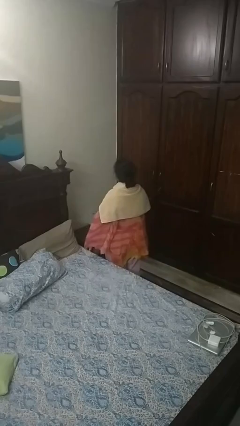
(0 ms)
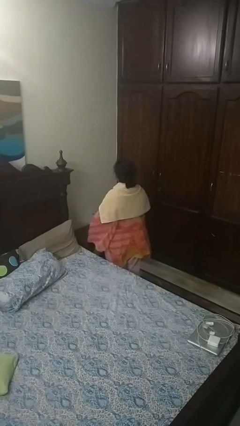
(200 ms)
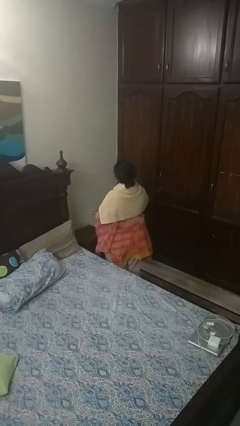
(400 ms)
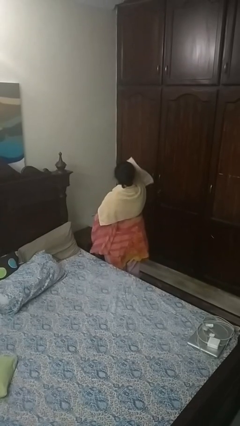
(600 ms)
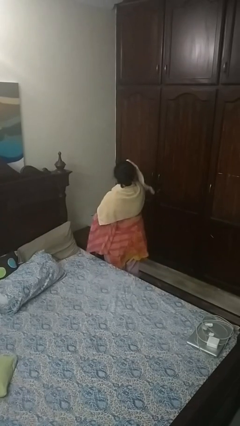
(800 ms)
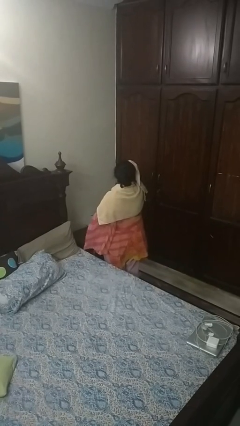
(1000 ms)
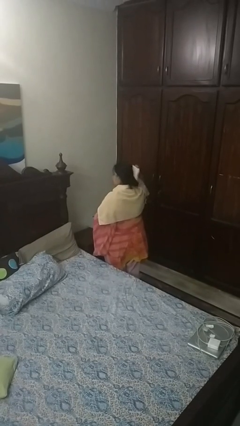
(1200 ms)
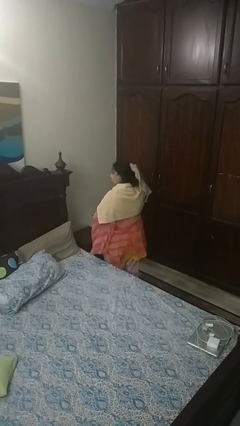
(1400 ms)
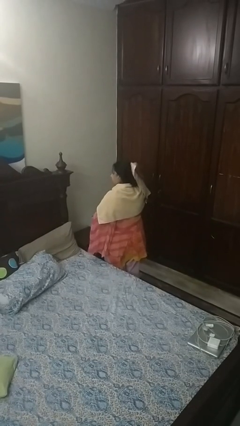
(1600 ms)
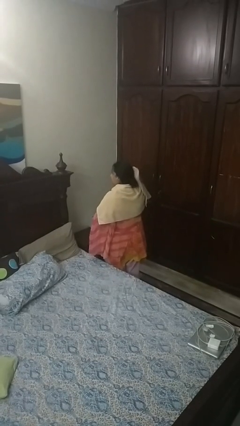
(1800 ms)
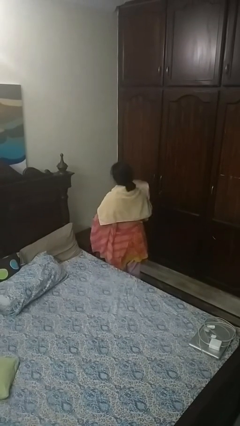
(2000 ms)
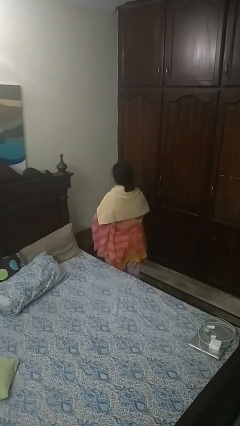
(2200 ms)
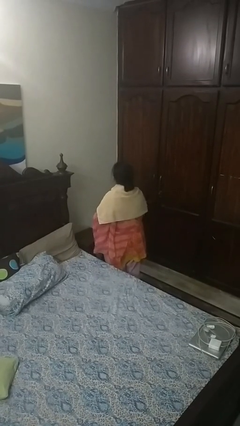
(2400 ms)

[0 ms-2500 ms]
person dries hair with towel

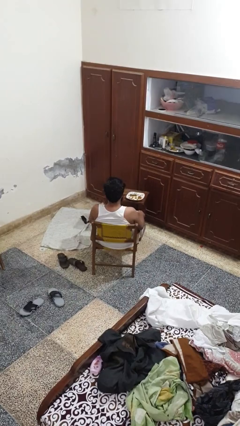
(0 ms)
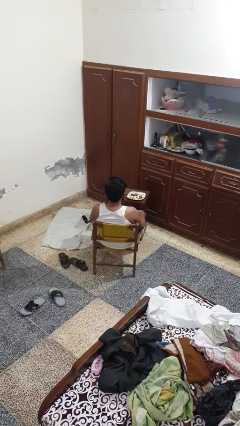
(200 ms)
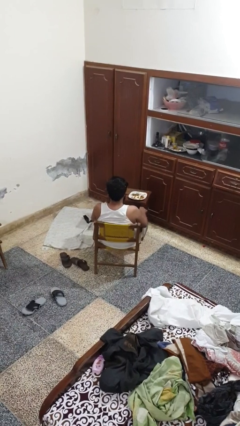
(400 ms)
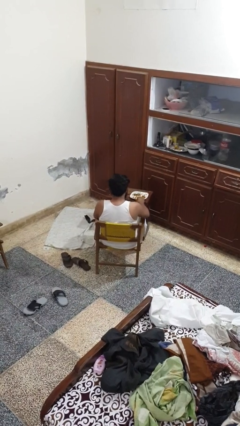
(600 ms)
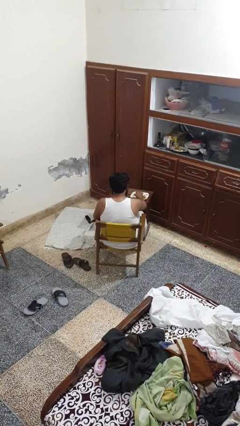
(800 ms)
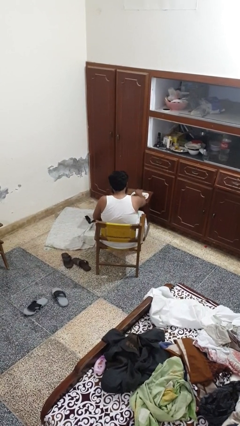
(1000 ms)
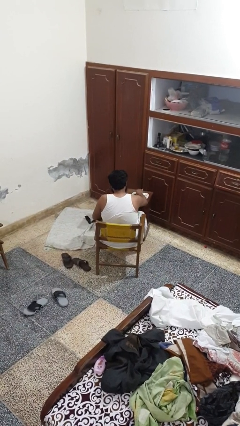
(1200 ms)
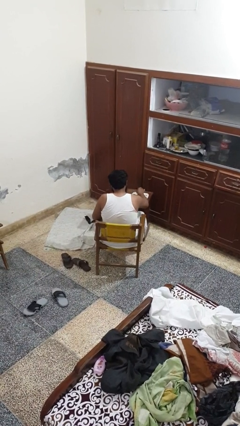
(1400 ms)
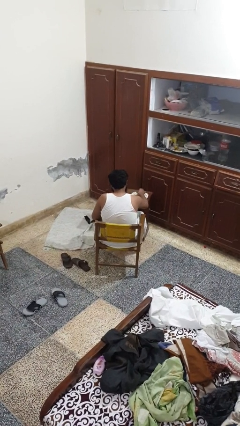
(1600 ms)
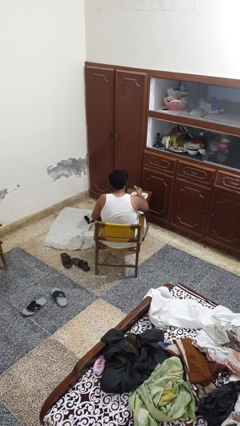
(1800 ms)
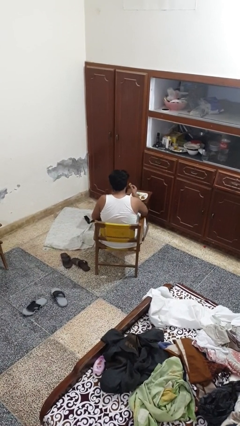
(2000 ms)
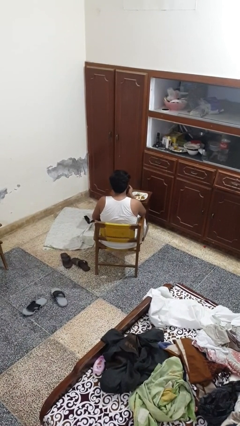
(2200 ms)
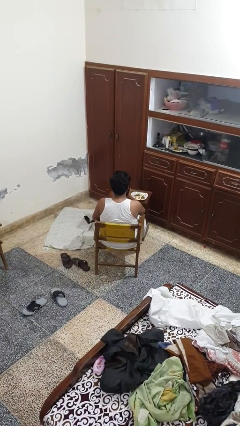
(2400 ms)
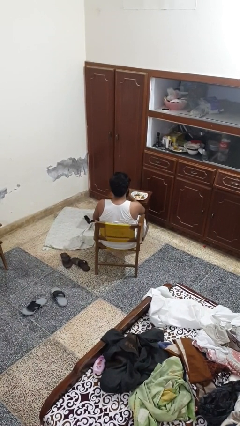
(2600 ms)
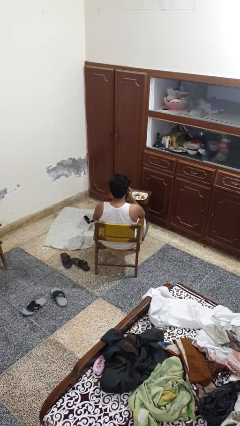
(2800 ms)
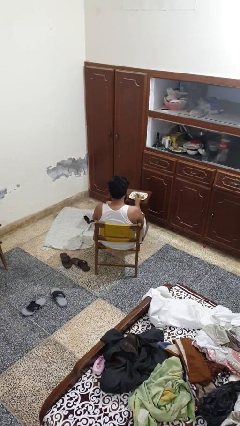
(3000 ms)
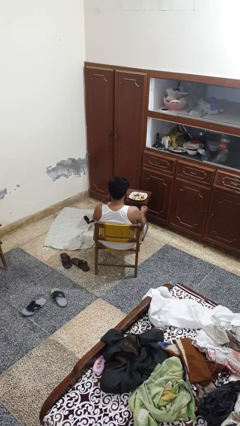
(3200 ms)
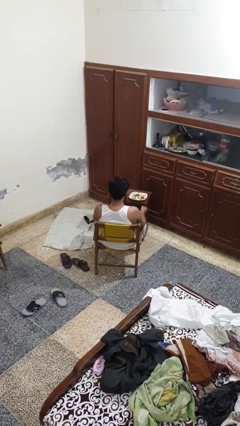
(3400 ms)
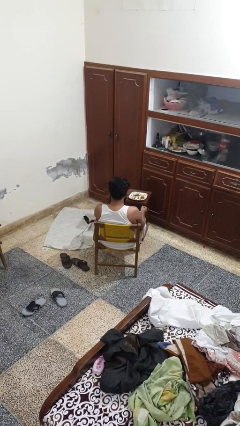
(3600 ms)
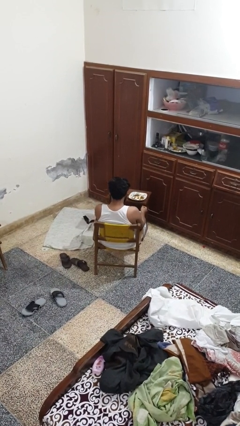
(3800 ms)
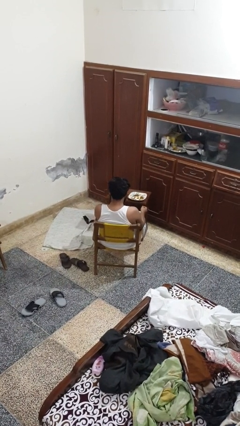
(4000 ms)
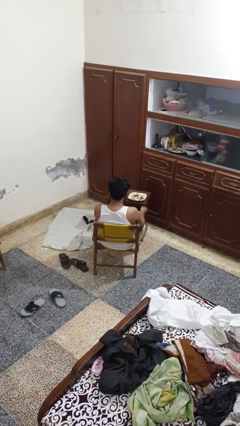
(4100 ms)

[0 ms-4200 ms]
person eats with hands

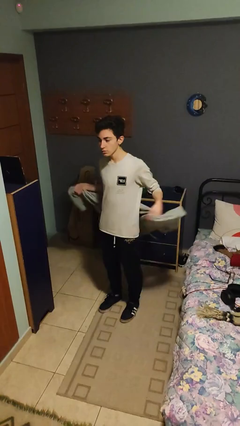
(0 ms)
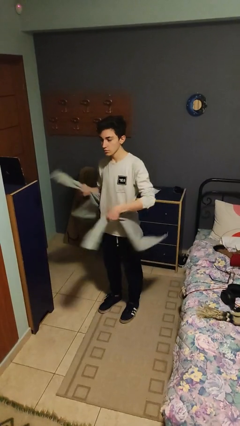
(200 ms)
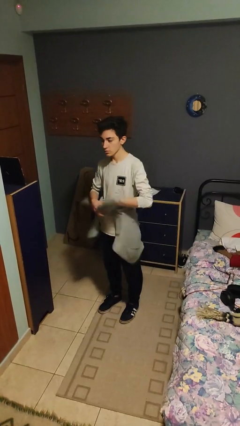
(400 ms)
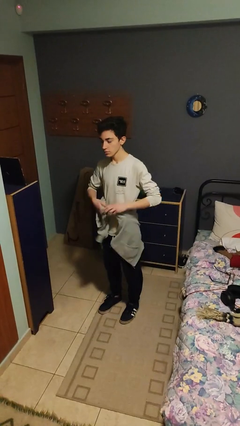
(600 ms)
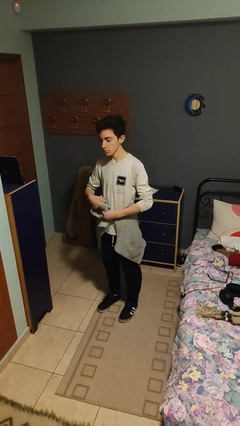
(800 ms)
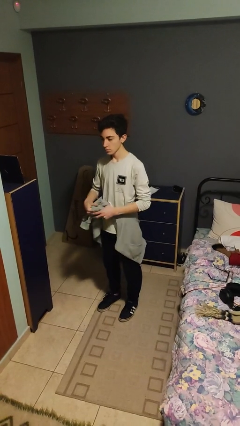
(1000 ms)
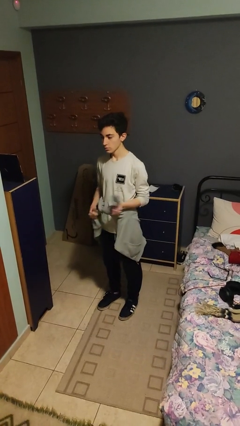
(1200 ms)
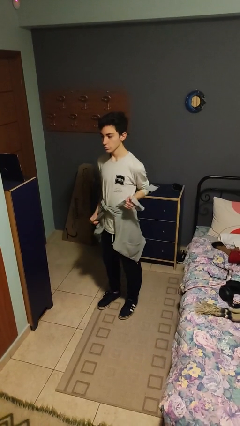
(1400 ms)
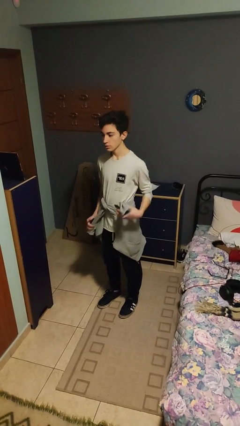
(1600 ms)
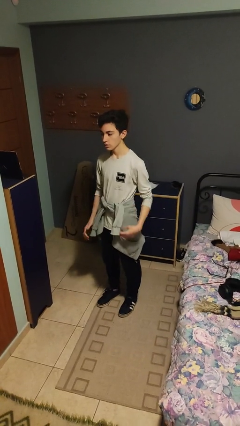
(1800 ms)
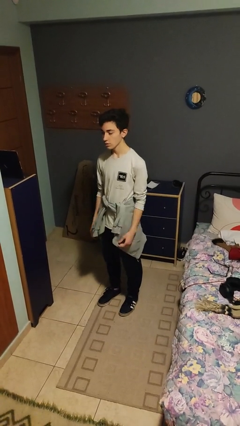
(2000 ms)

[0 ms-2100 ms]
person ties jacket around waist

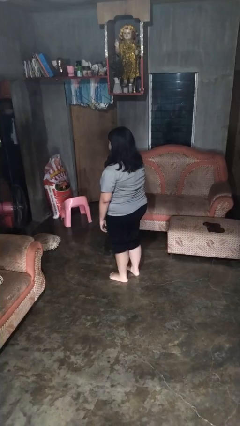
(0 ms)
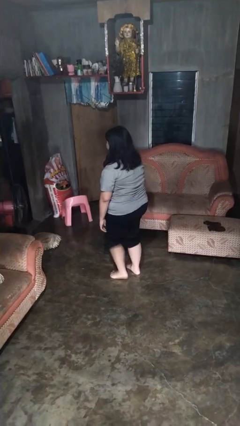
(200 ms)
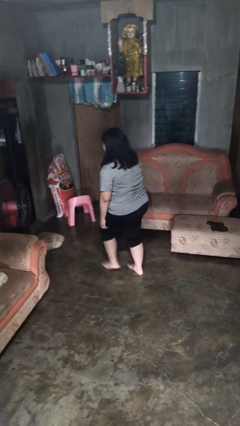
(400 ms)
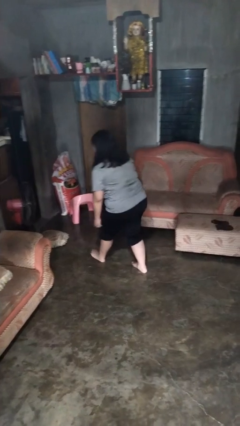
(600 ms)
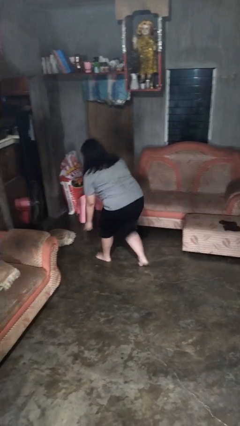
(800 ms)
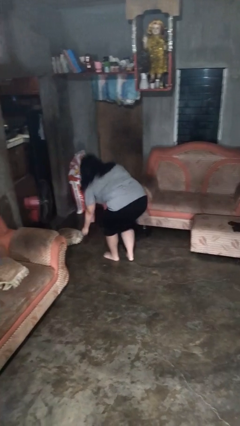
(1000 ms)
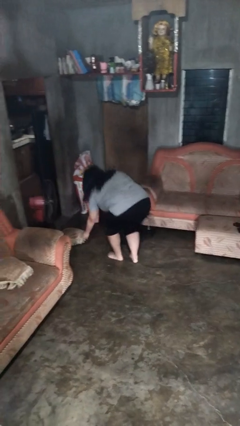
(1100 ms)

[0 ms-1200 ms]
person picks up object from floor

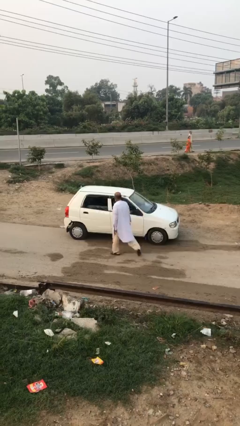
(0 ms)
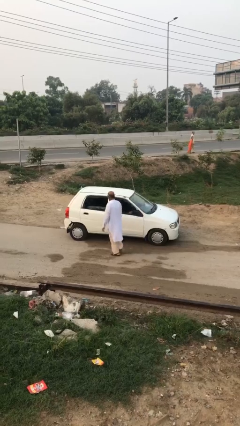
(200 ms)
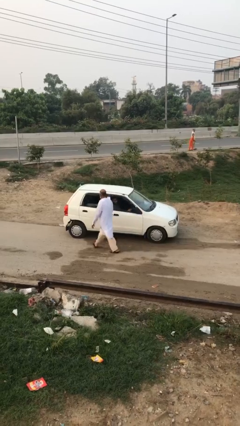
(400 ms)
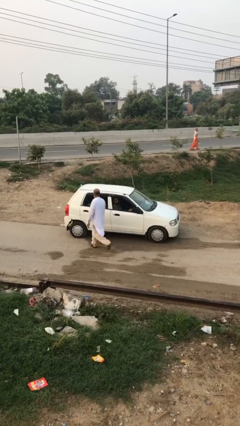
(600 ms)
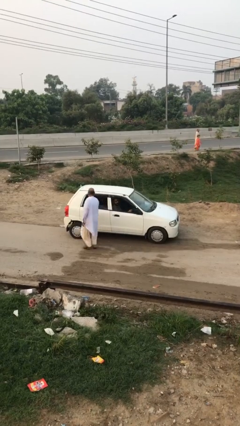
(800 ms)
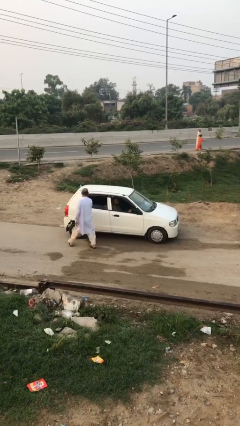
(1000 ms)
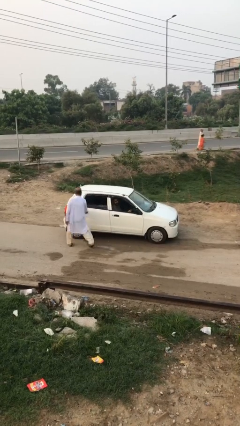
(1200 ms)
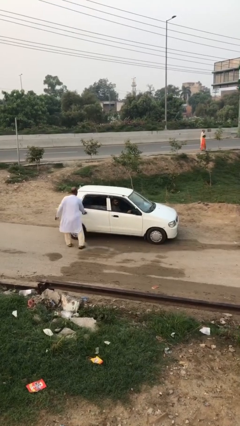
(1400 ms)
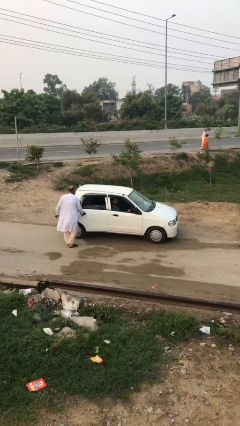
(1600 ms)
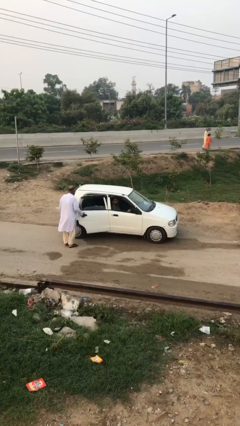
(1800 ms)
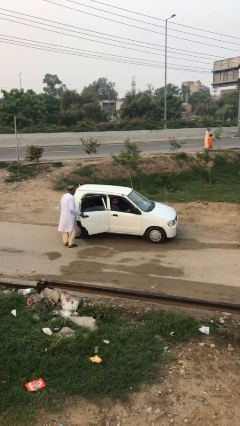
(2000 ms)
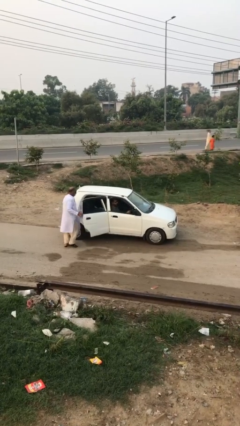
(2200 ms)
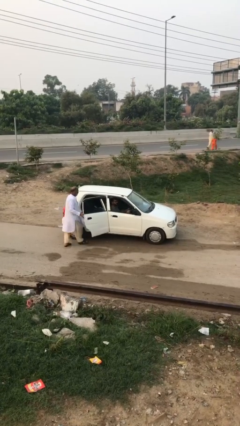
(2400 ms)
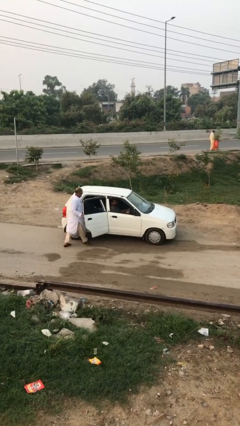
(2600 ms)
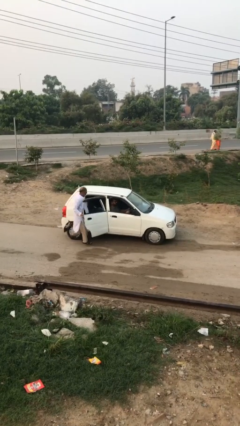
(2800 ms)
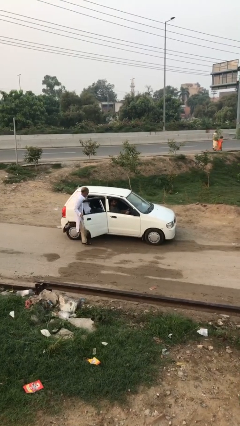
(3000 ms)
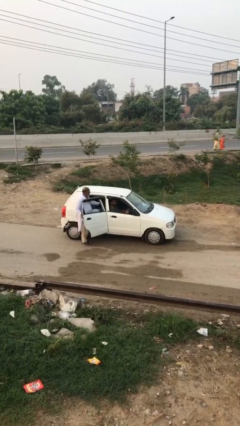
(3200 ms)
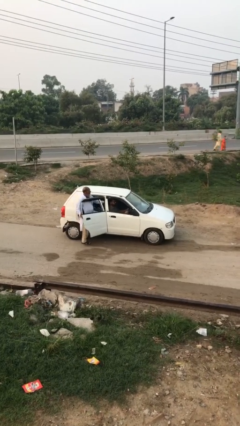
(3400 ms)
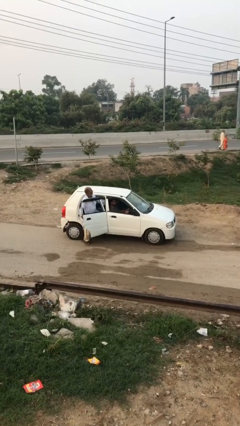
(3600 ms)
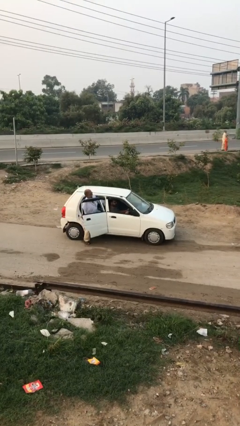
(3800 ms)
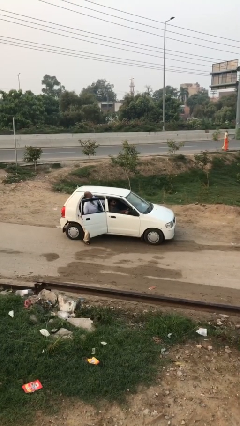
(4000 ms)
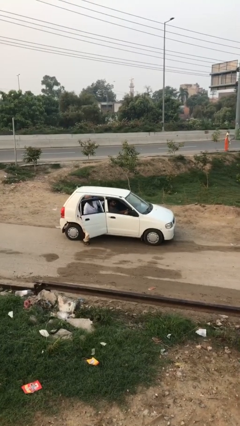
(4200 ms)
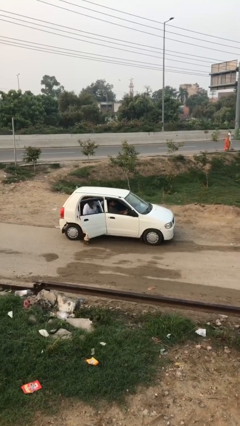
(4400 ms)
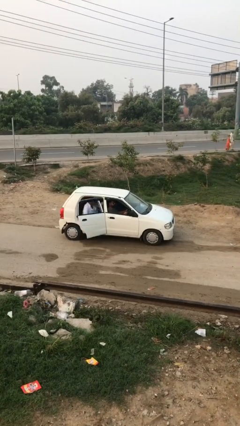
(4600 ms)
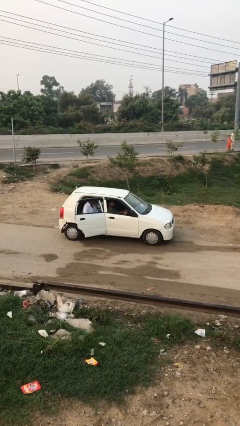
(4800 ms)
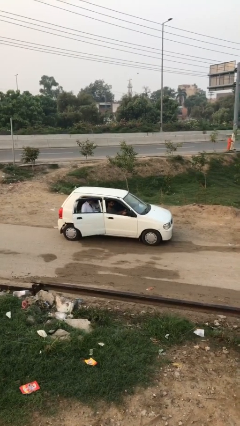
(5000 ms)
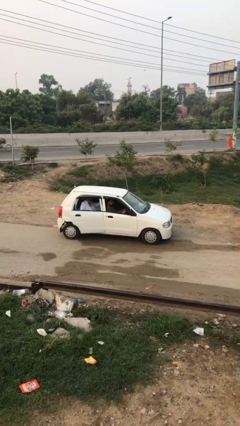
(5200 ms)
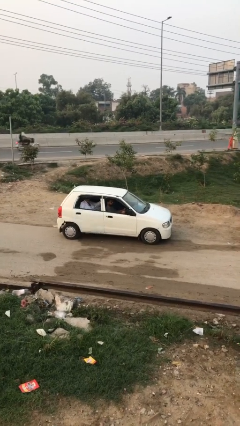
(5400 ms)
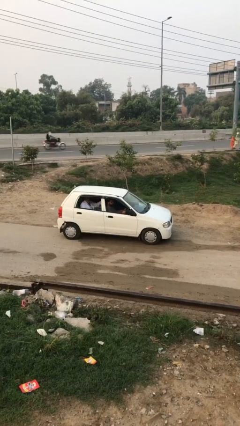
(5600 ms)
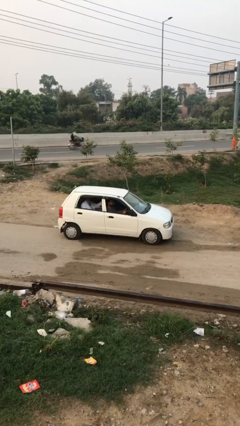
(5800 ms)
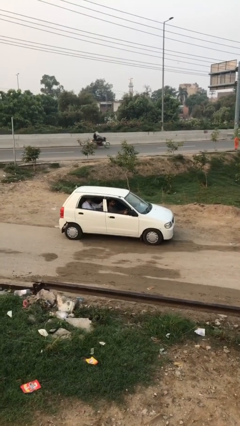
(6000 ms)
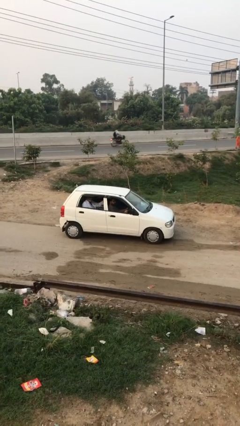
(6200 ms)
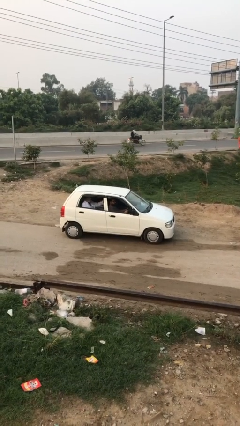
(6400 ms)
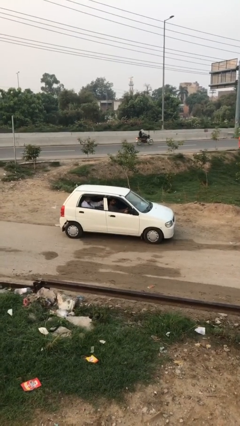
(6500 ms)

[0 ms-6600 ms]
car picks up person

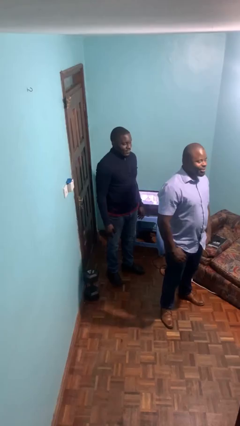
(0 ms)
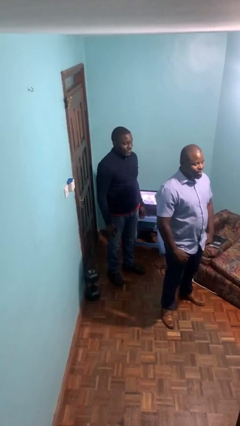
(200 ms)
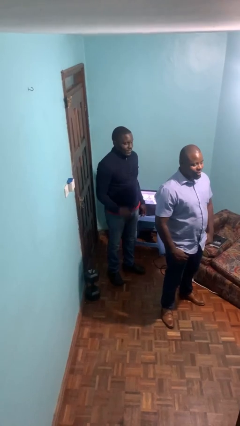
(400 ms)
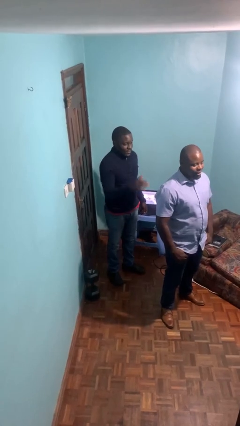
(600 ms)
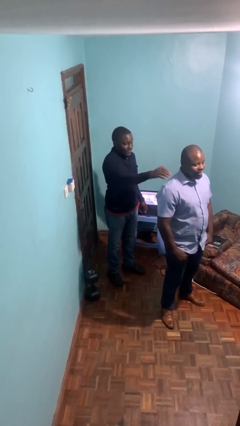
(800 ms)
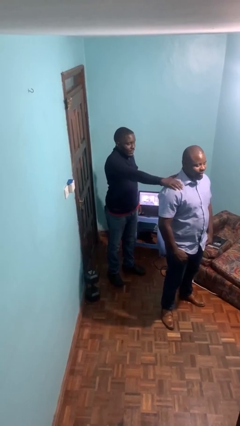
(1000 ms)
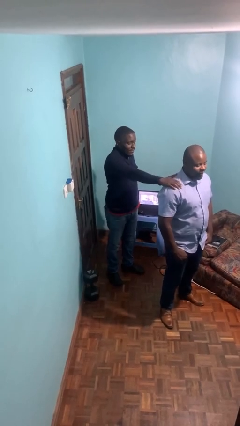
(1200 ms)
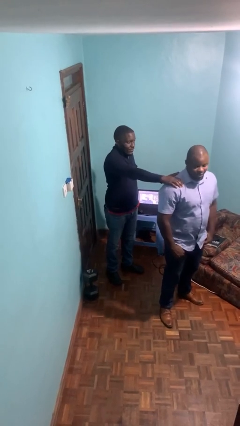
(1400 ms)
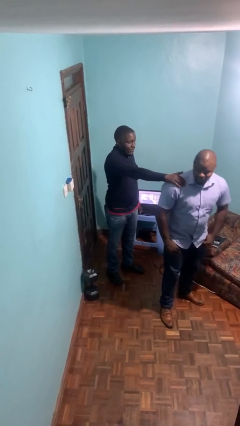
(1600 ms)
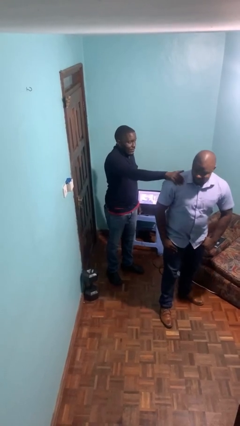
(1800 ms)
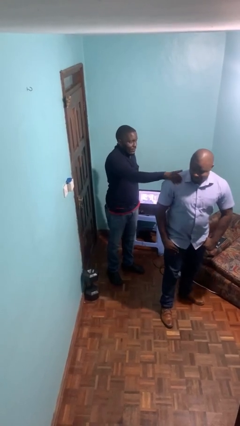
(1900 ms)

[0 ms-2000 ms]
person grabs person by shoulder
